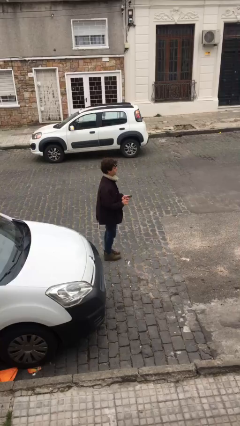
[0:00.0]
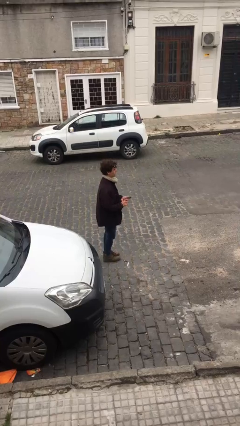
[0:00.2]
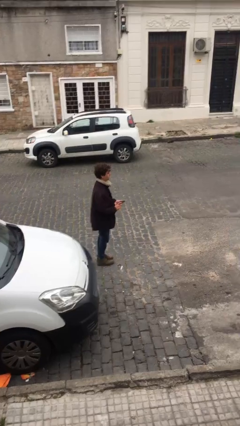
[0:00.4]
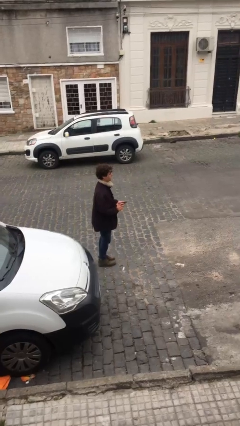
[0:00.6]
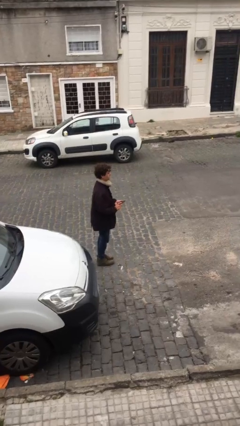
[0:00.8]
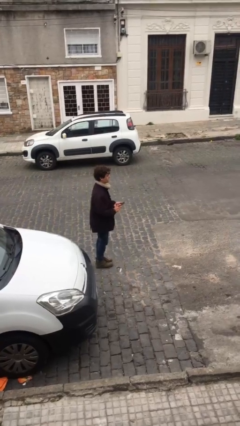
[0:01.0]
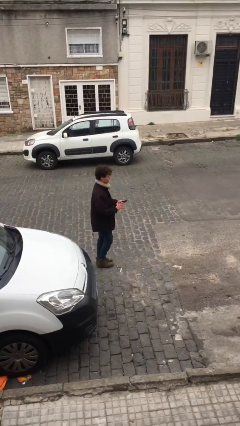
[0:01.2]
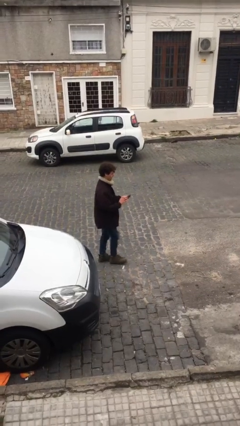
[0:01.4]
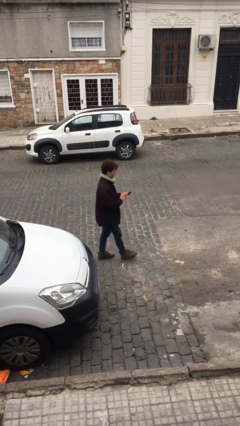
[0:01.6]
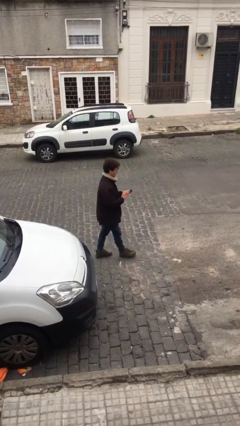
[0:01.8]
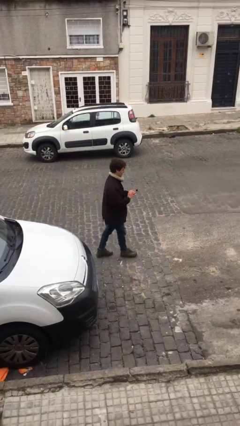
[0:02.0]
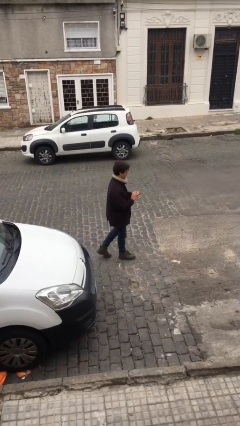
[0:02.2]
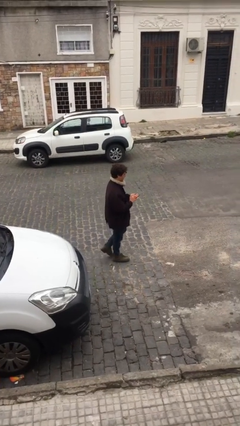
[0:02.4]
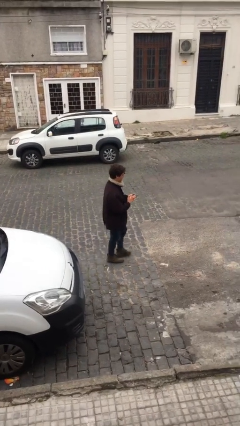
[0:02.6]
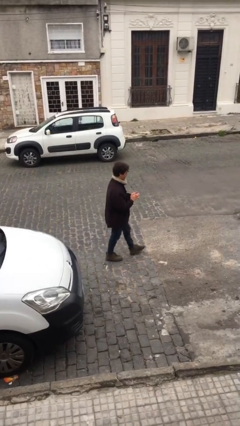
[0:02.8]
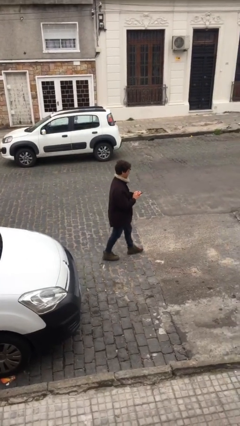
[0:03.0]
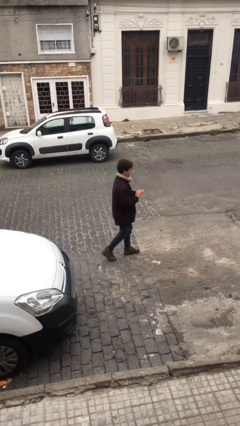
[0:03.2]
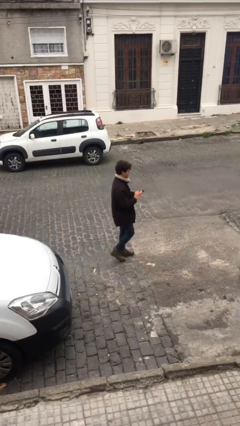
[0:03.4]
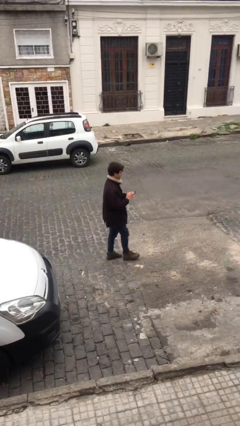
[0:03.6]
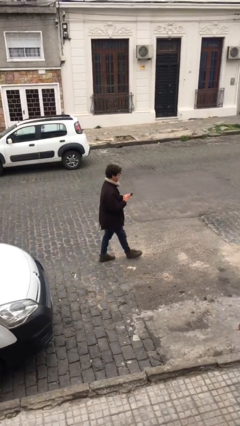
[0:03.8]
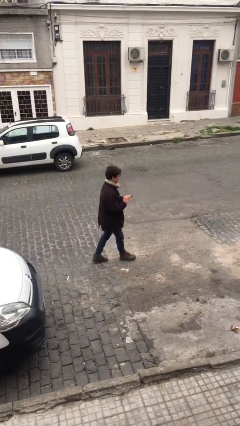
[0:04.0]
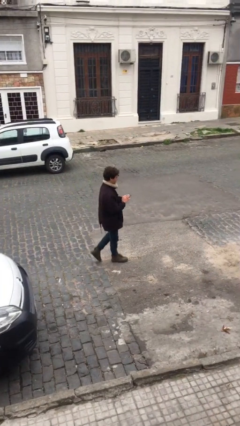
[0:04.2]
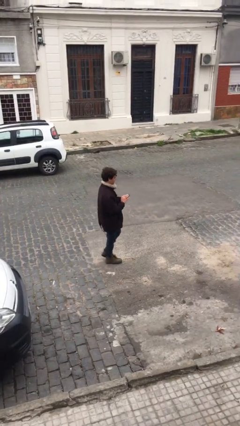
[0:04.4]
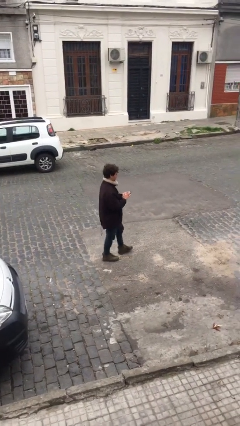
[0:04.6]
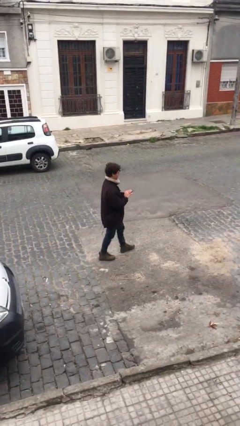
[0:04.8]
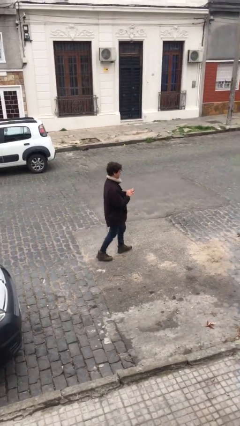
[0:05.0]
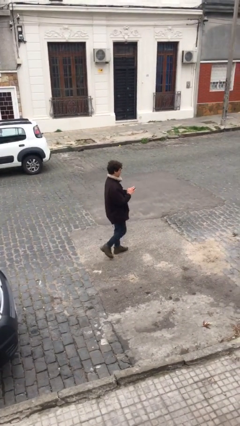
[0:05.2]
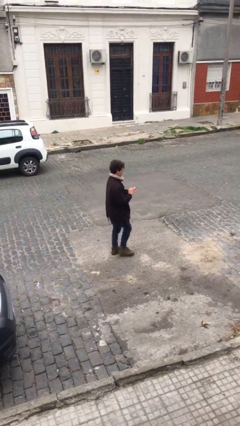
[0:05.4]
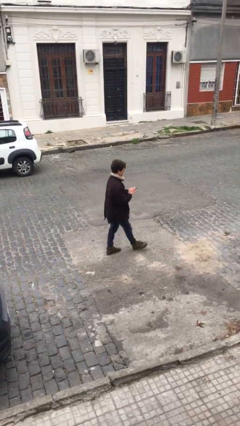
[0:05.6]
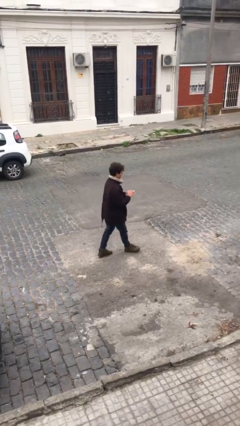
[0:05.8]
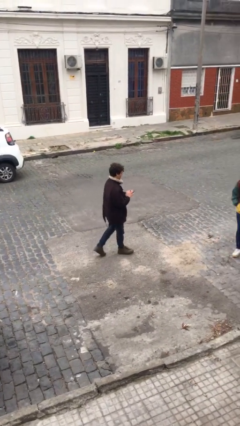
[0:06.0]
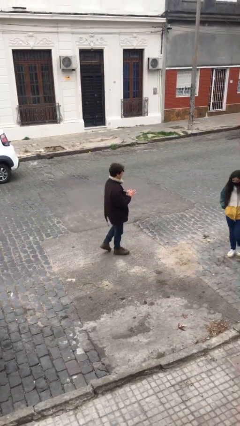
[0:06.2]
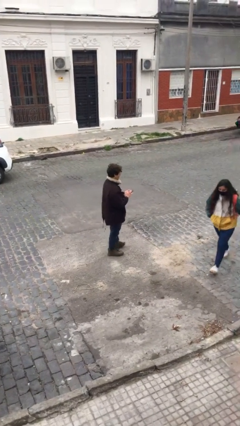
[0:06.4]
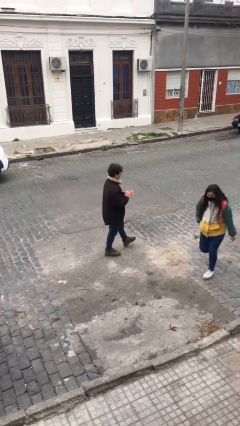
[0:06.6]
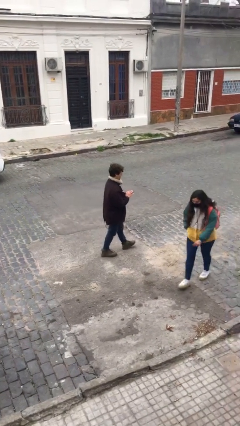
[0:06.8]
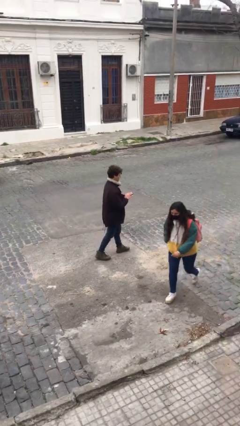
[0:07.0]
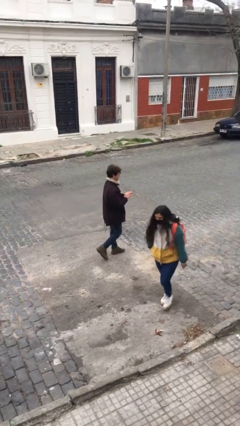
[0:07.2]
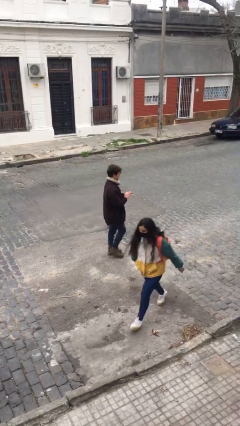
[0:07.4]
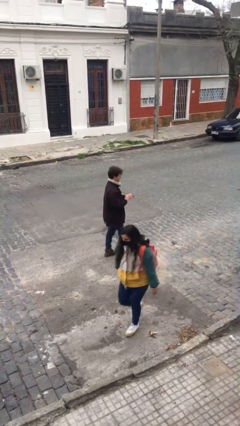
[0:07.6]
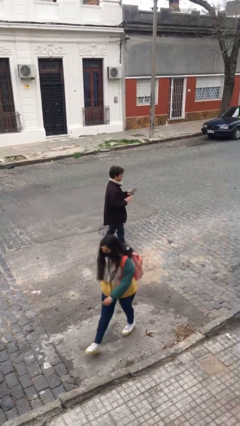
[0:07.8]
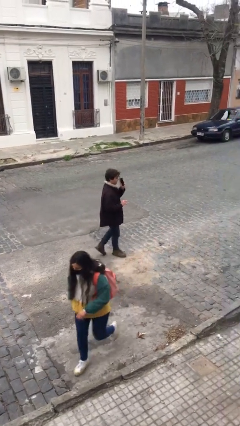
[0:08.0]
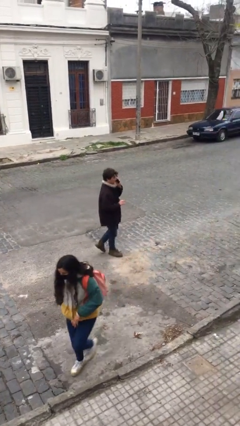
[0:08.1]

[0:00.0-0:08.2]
person texts on phone

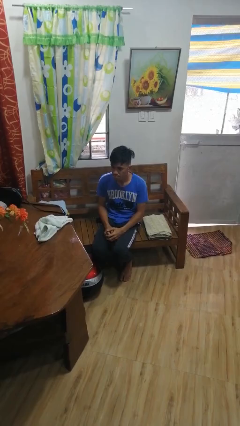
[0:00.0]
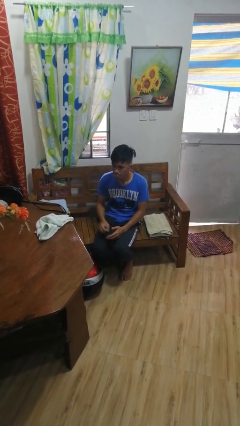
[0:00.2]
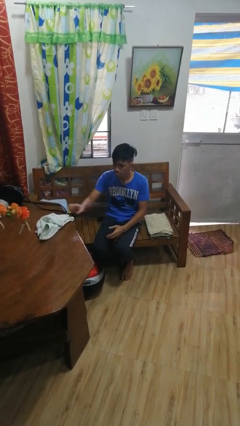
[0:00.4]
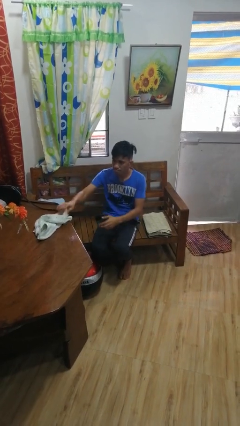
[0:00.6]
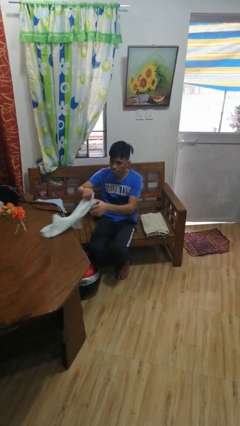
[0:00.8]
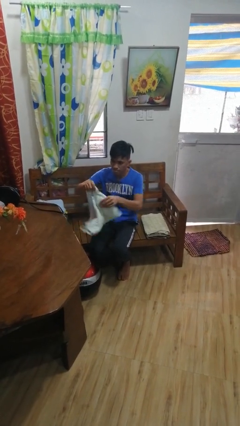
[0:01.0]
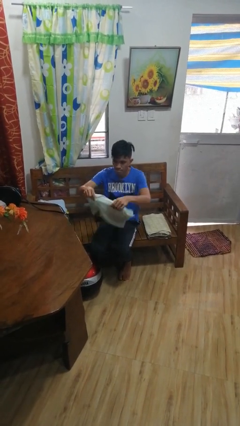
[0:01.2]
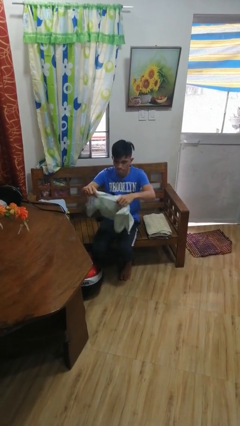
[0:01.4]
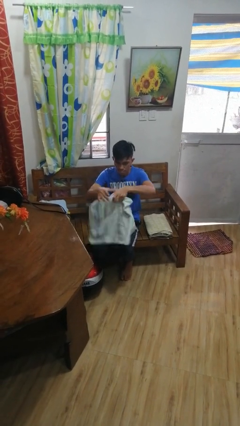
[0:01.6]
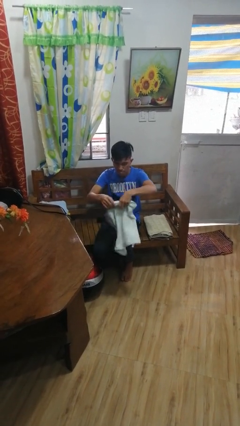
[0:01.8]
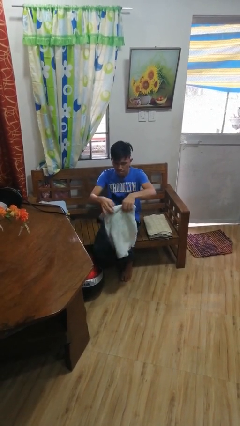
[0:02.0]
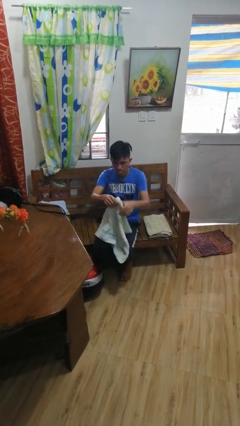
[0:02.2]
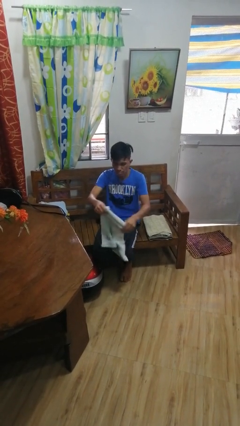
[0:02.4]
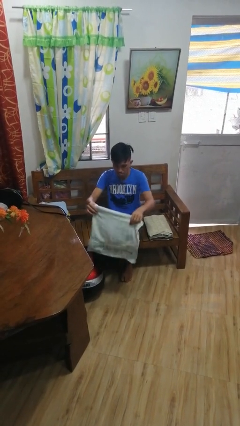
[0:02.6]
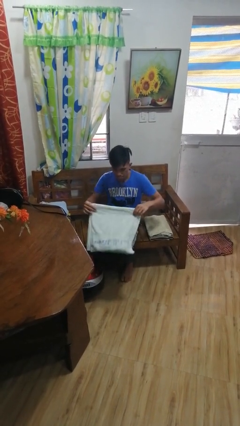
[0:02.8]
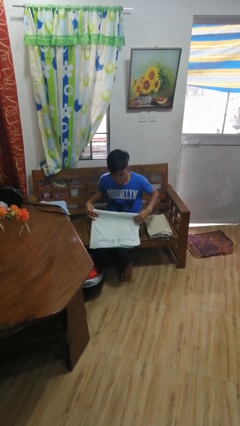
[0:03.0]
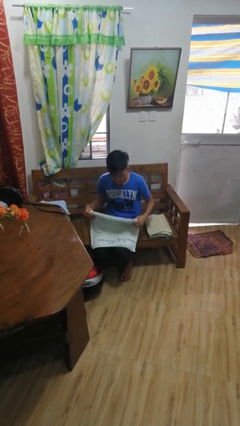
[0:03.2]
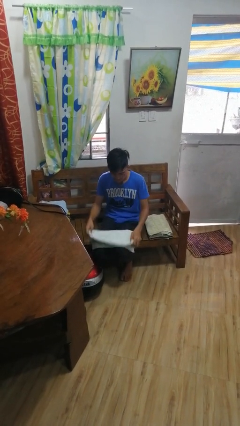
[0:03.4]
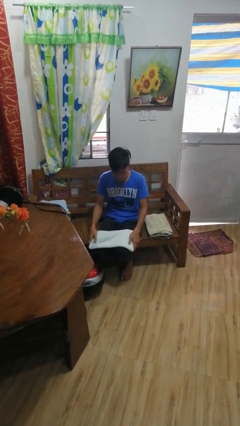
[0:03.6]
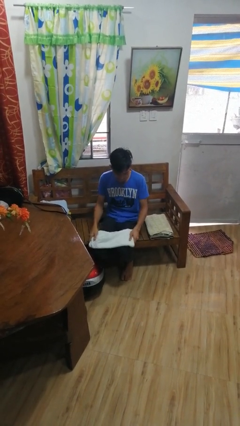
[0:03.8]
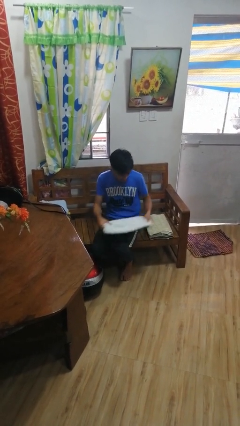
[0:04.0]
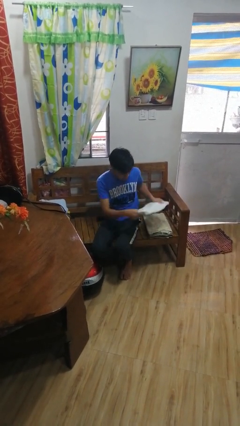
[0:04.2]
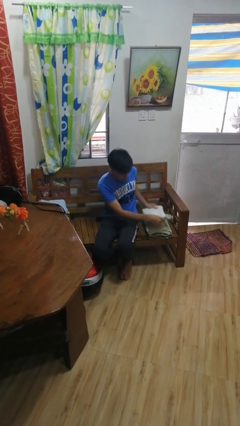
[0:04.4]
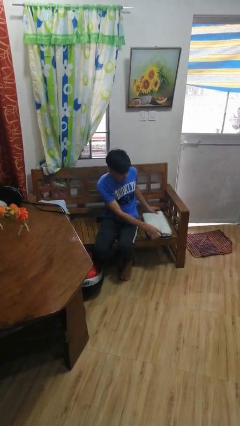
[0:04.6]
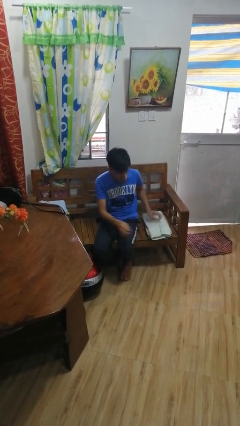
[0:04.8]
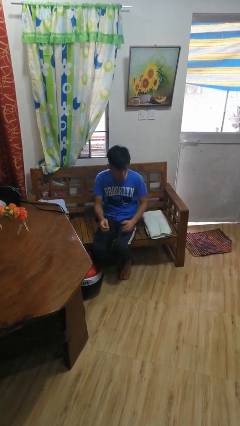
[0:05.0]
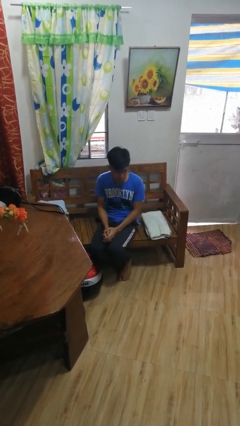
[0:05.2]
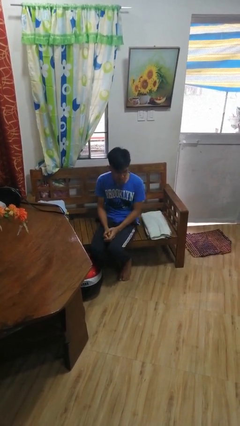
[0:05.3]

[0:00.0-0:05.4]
person folds towel

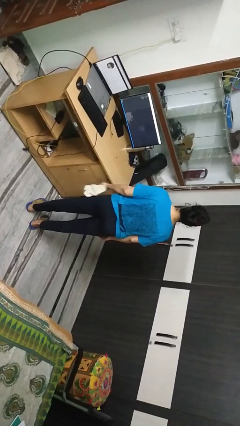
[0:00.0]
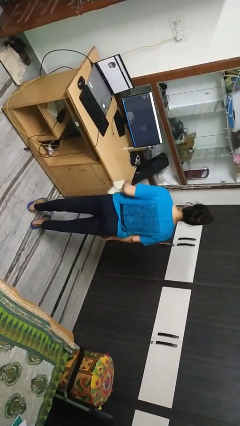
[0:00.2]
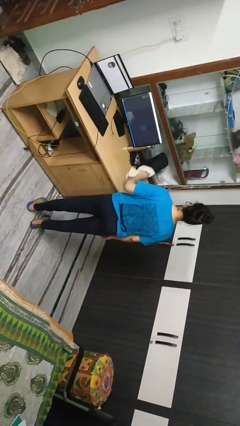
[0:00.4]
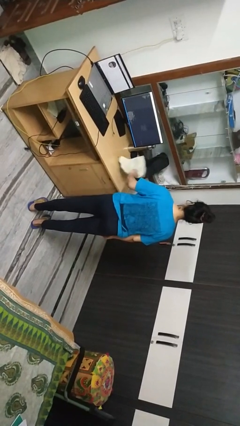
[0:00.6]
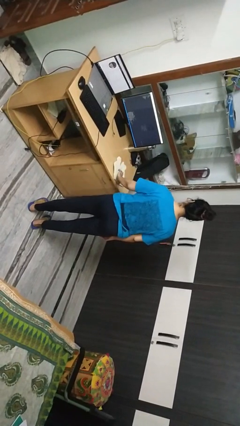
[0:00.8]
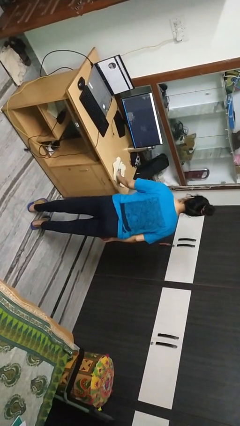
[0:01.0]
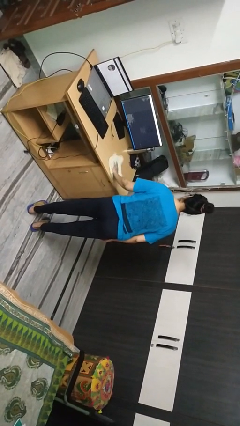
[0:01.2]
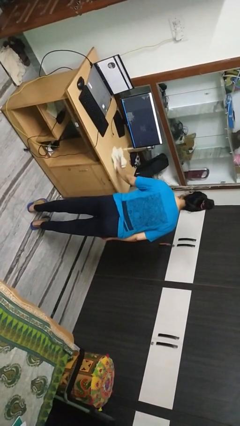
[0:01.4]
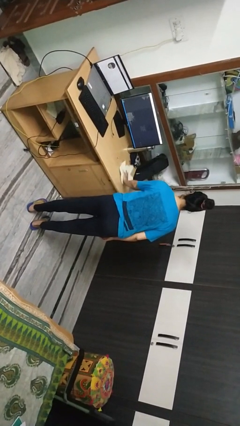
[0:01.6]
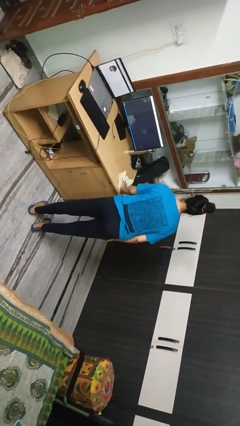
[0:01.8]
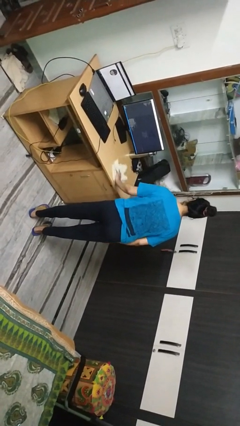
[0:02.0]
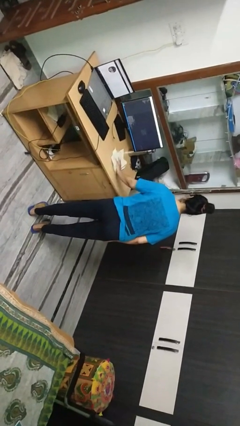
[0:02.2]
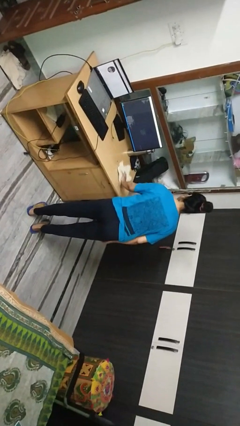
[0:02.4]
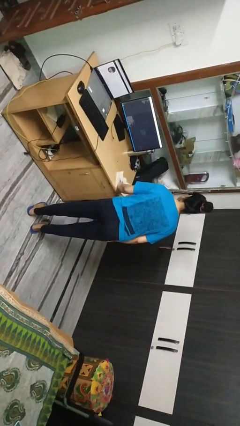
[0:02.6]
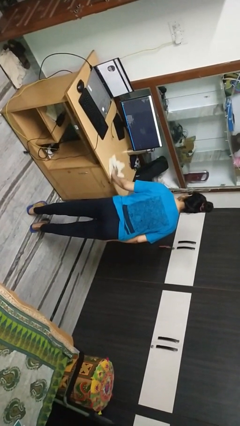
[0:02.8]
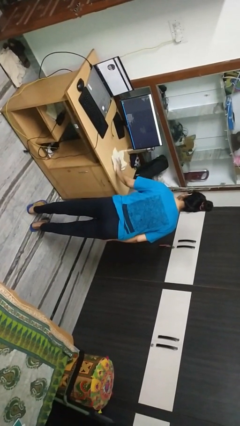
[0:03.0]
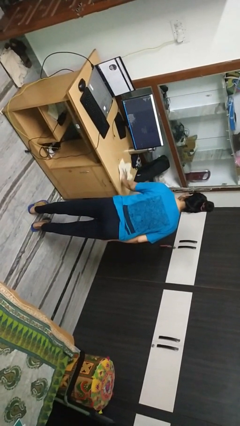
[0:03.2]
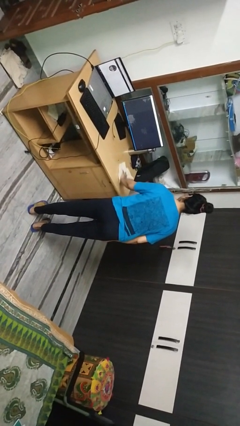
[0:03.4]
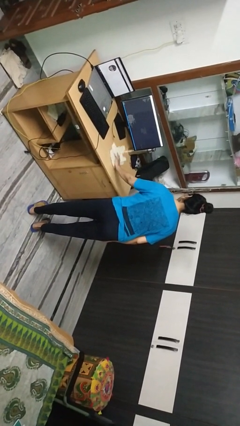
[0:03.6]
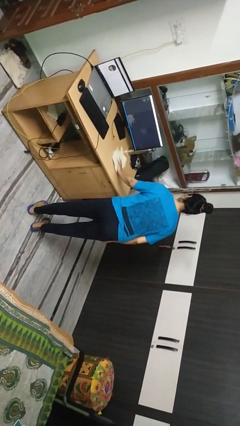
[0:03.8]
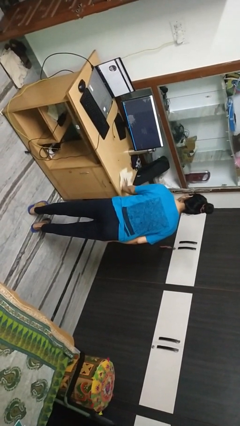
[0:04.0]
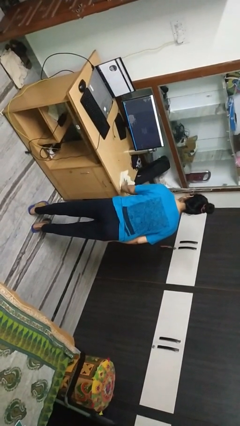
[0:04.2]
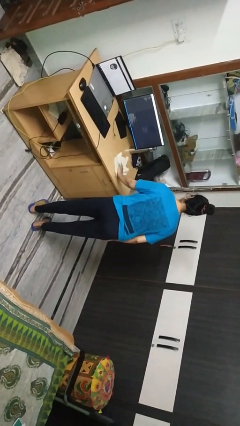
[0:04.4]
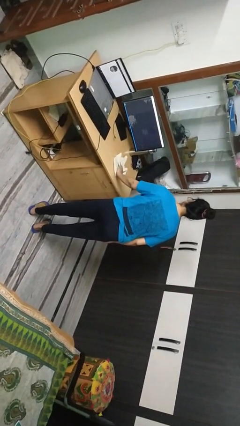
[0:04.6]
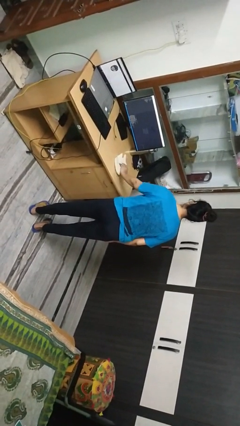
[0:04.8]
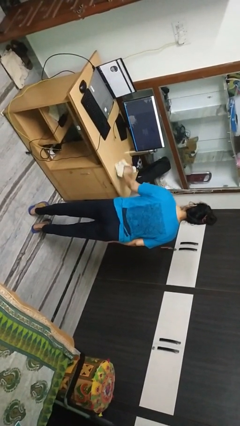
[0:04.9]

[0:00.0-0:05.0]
person cleans table with rag
